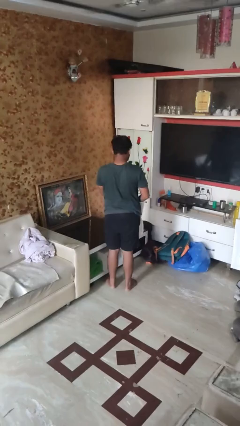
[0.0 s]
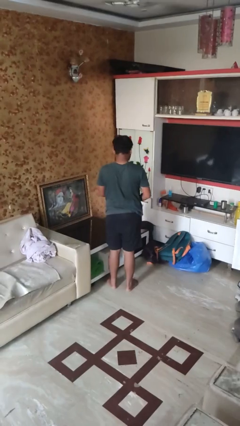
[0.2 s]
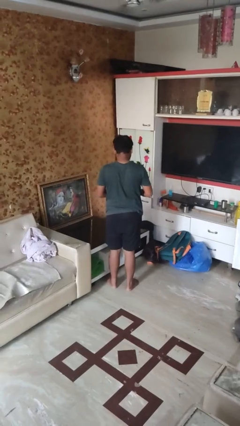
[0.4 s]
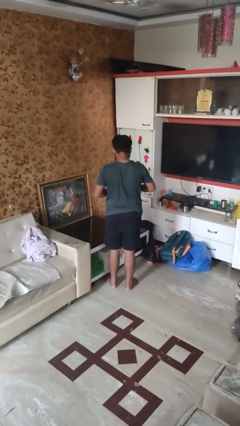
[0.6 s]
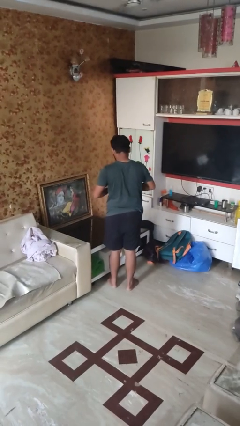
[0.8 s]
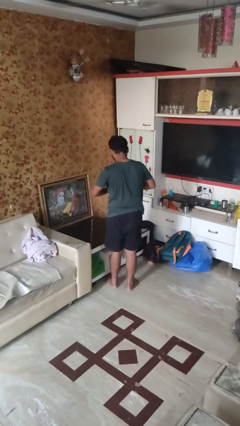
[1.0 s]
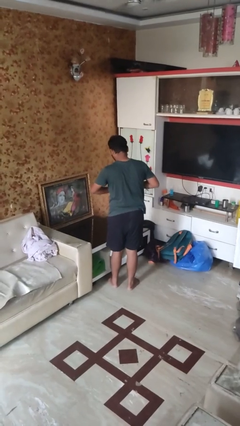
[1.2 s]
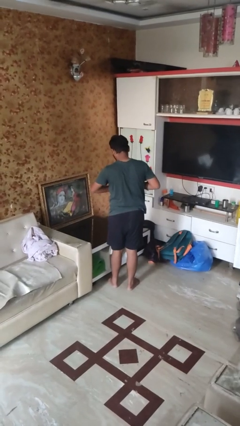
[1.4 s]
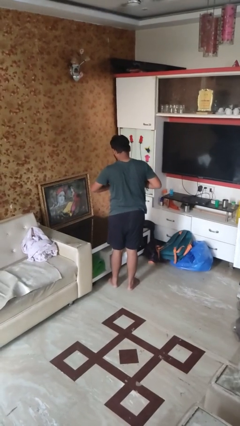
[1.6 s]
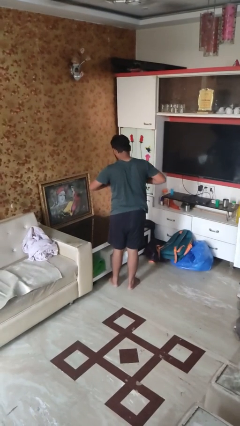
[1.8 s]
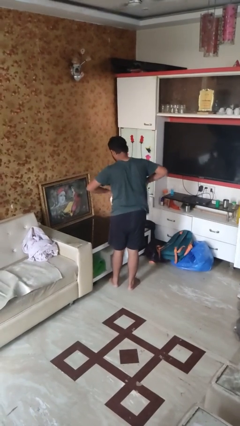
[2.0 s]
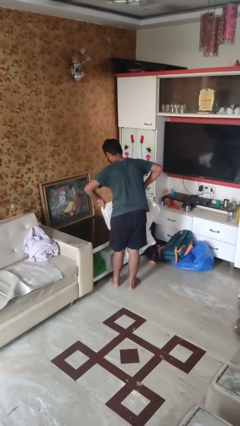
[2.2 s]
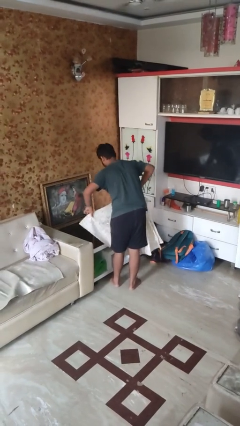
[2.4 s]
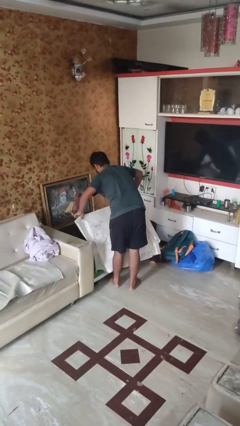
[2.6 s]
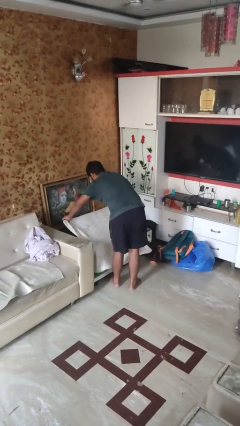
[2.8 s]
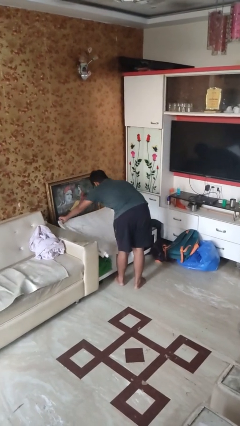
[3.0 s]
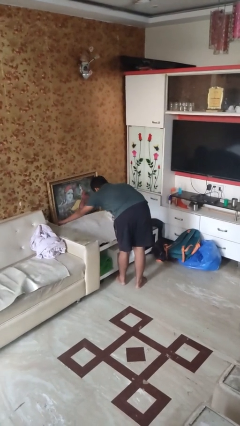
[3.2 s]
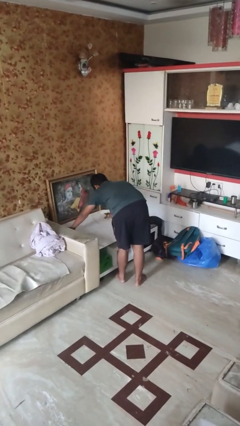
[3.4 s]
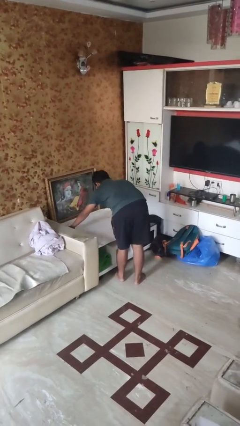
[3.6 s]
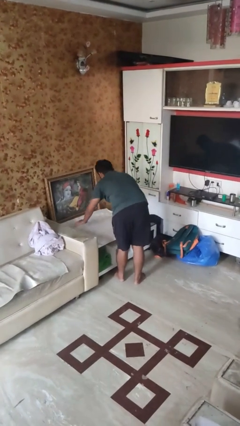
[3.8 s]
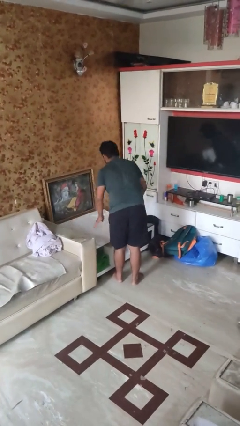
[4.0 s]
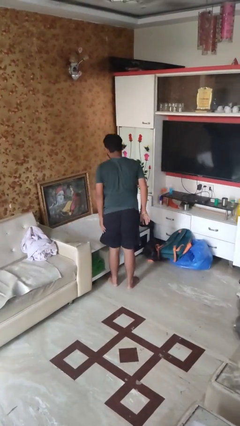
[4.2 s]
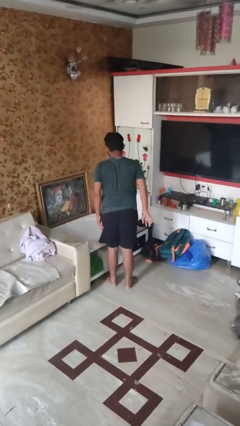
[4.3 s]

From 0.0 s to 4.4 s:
person spreads tablecloth

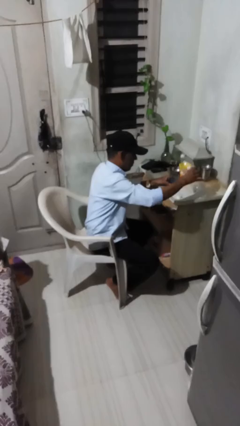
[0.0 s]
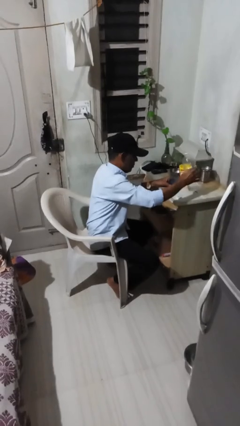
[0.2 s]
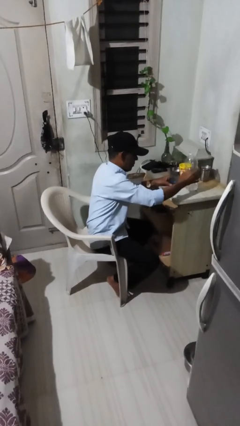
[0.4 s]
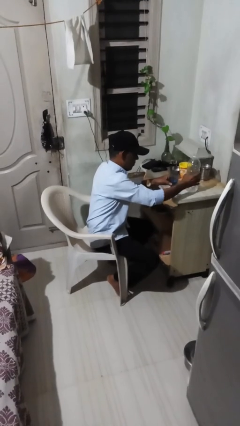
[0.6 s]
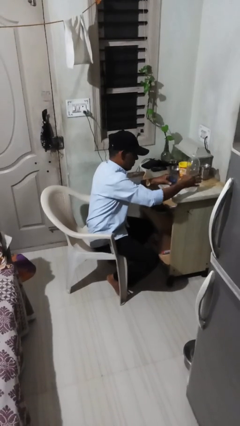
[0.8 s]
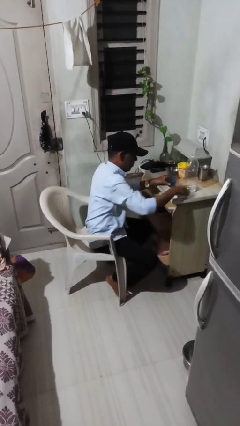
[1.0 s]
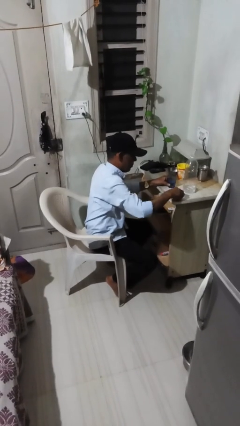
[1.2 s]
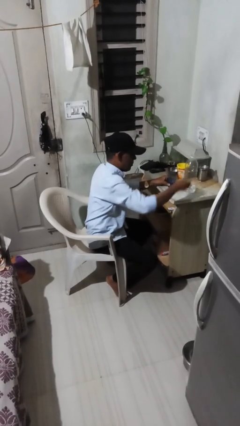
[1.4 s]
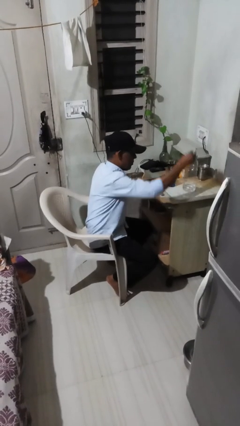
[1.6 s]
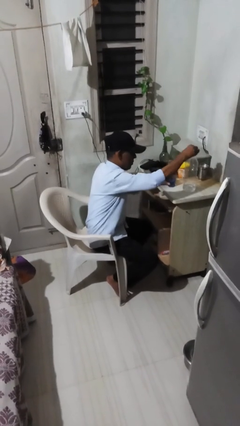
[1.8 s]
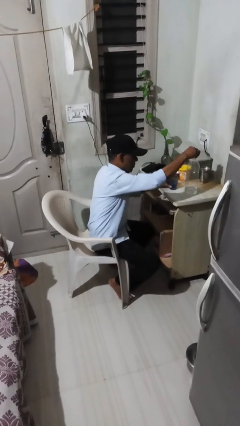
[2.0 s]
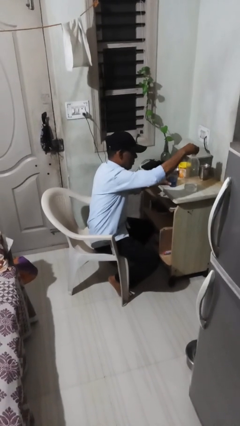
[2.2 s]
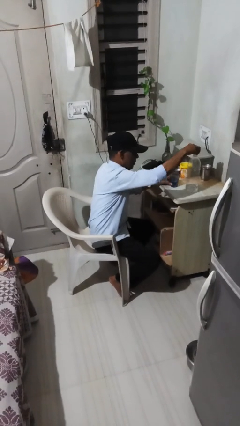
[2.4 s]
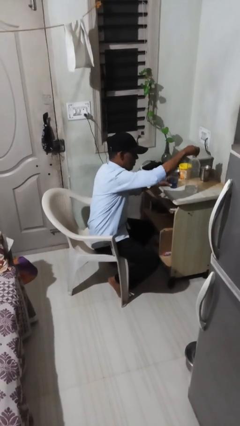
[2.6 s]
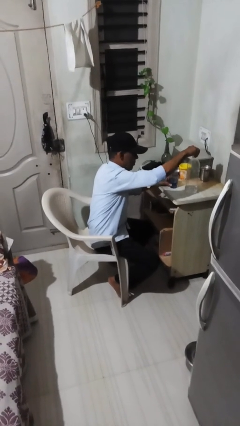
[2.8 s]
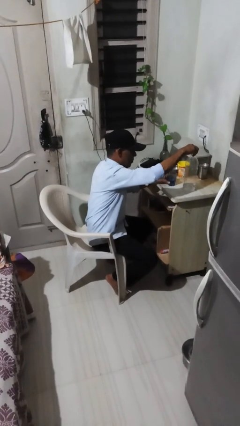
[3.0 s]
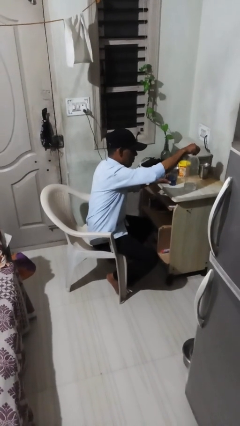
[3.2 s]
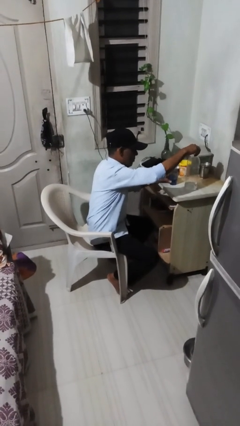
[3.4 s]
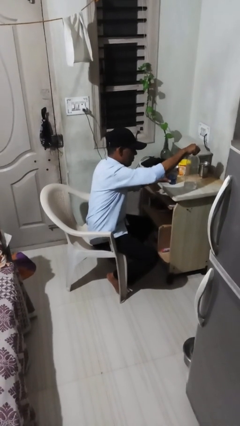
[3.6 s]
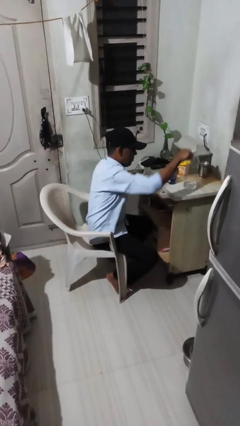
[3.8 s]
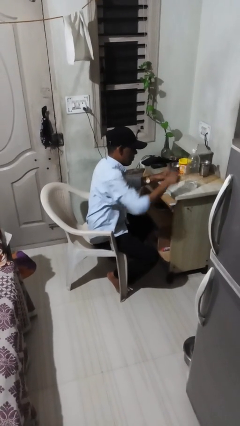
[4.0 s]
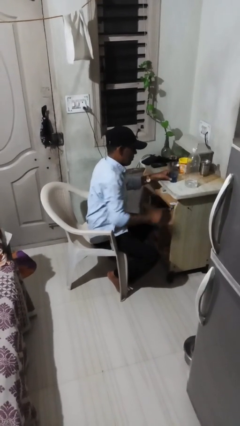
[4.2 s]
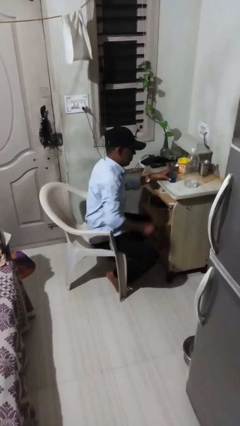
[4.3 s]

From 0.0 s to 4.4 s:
person screws lid to bottle

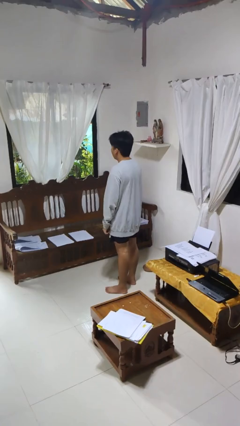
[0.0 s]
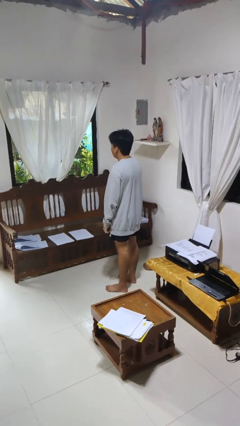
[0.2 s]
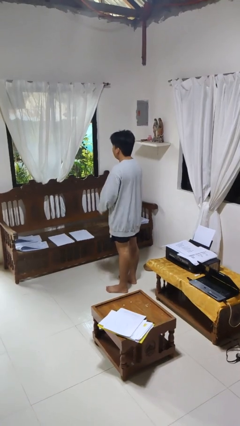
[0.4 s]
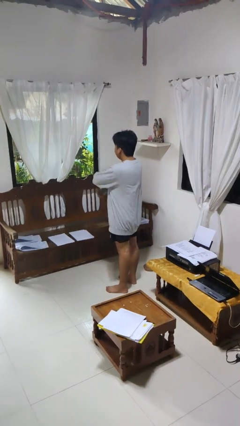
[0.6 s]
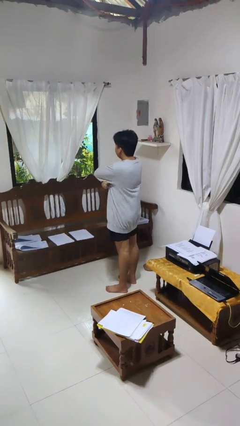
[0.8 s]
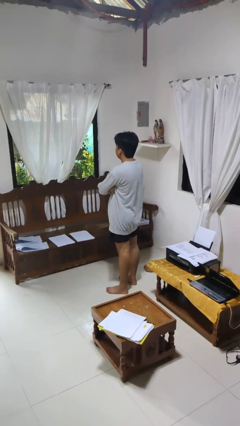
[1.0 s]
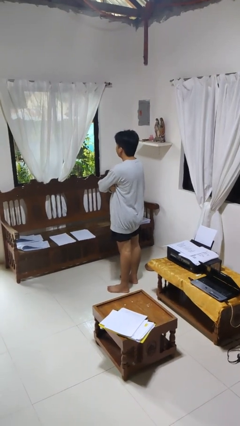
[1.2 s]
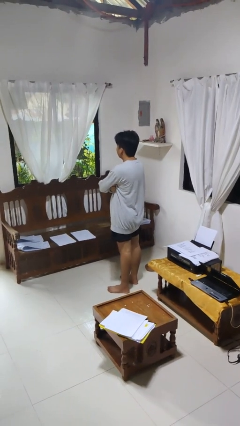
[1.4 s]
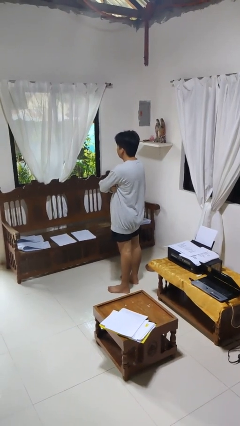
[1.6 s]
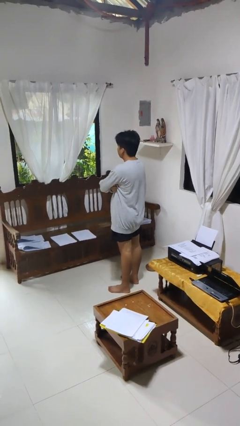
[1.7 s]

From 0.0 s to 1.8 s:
person gestures arms x

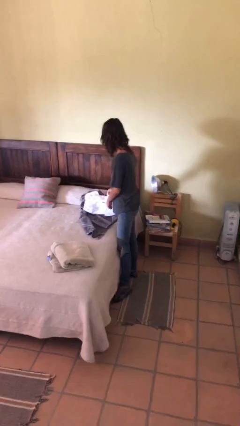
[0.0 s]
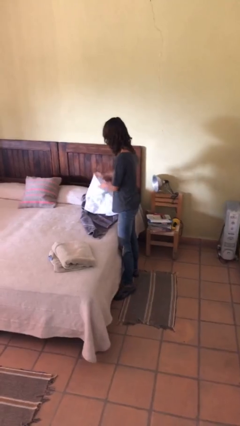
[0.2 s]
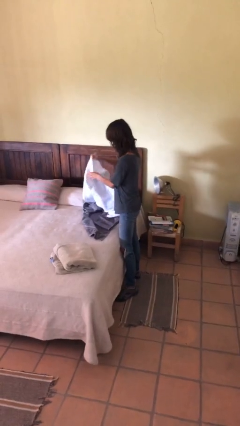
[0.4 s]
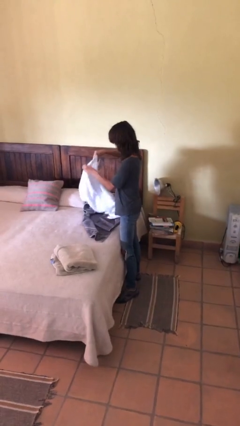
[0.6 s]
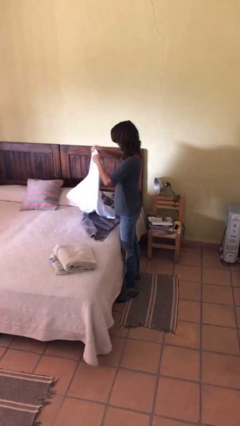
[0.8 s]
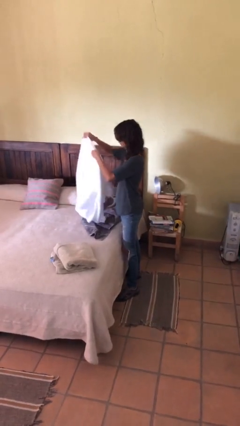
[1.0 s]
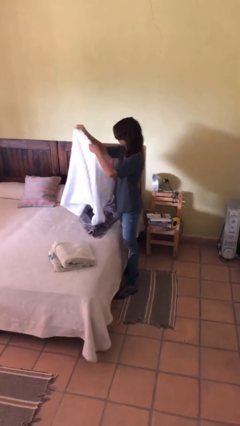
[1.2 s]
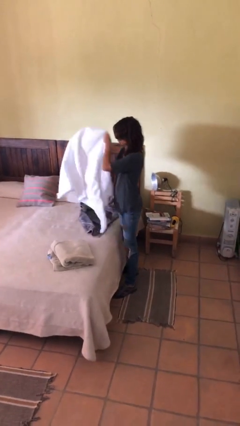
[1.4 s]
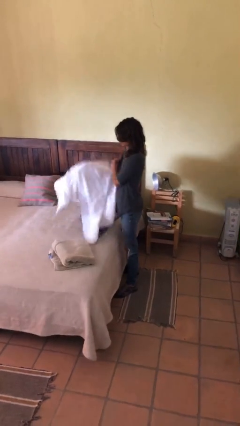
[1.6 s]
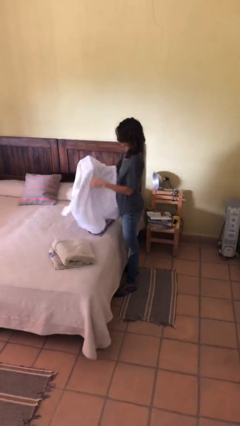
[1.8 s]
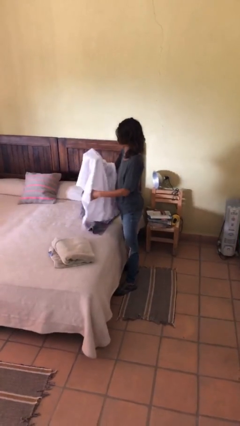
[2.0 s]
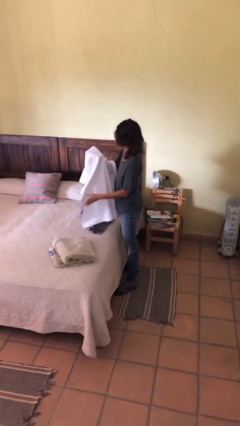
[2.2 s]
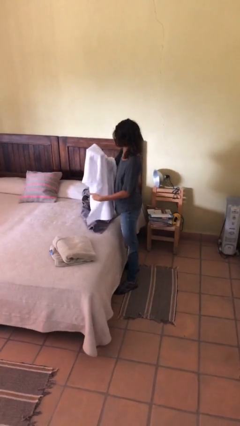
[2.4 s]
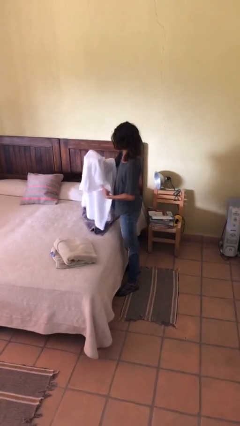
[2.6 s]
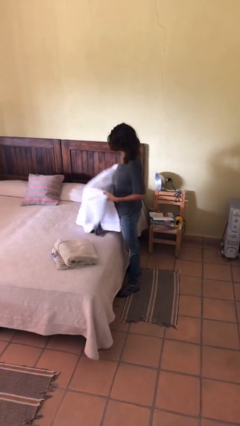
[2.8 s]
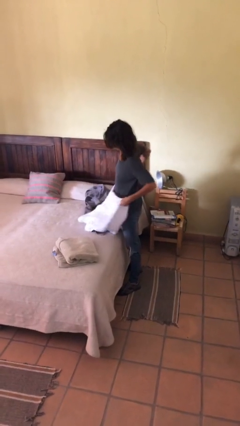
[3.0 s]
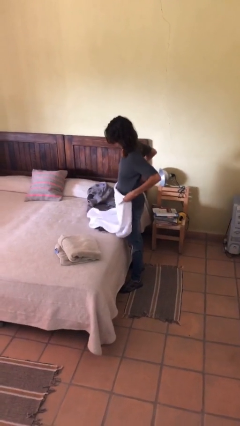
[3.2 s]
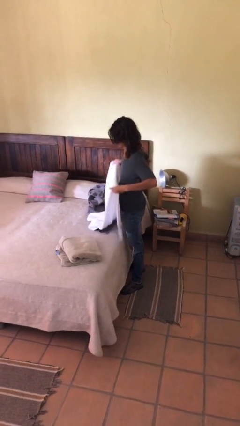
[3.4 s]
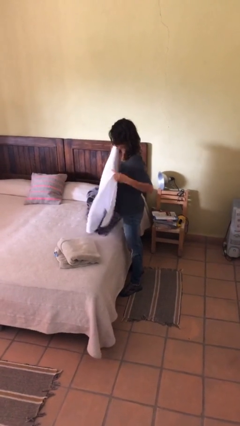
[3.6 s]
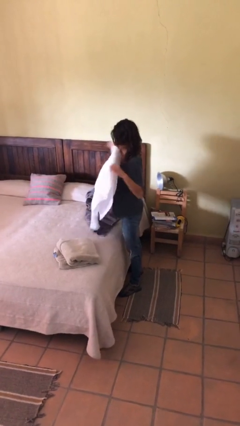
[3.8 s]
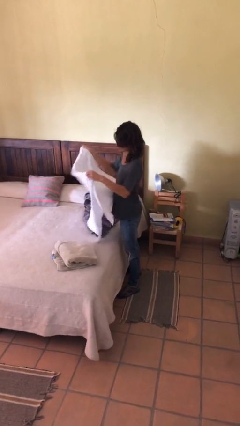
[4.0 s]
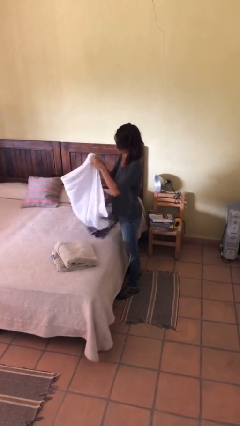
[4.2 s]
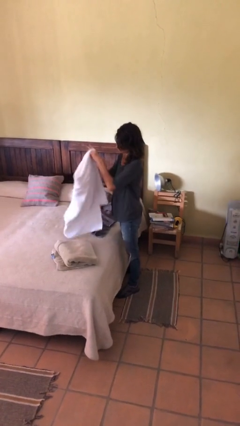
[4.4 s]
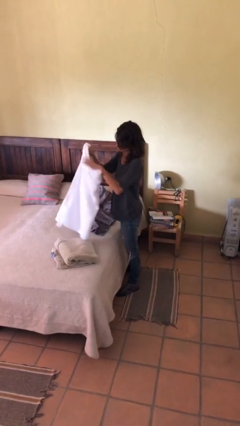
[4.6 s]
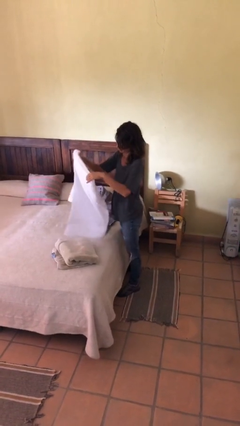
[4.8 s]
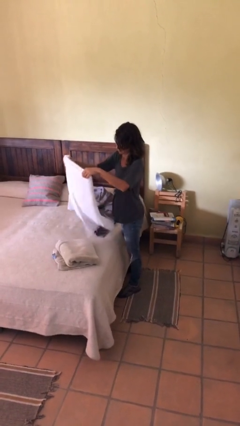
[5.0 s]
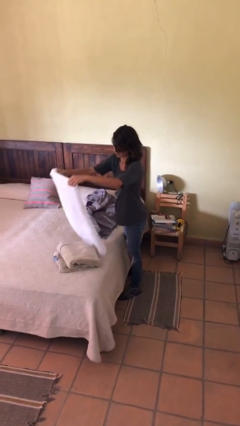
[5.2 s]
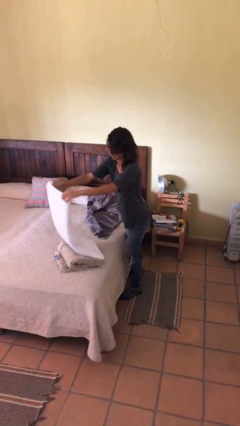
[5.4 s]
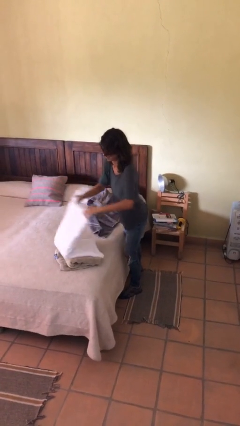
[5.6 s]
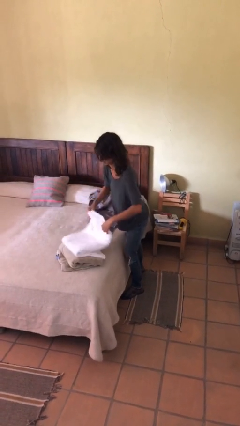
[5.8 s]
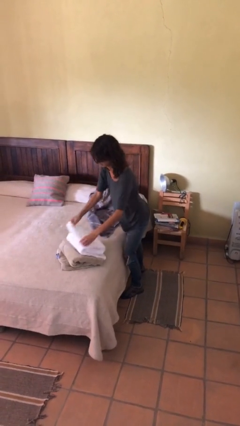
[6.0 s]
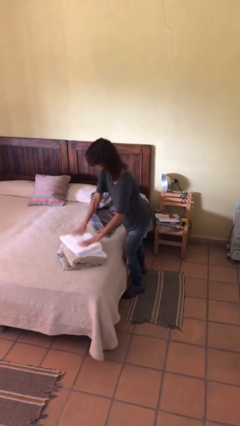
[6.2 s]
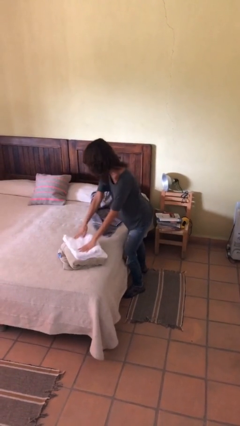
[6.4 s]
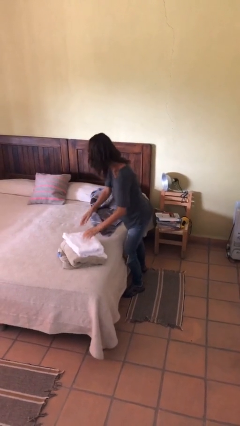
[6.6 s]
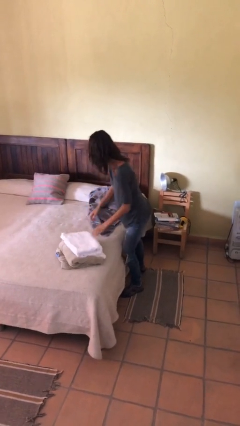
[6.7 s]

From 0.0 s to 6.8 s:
person folds towel

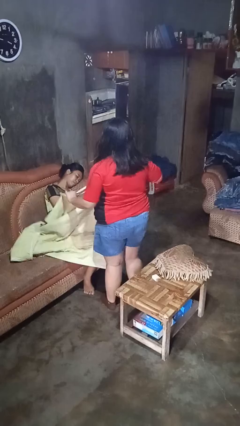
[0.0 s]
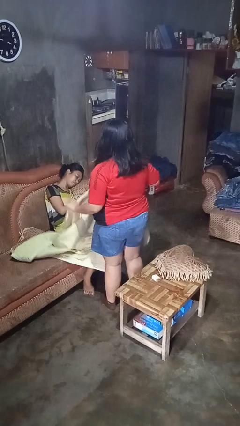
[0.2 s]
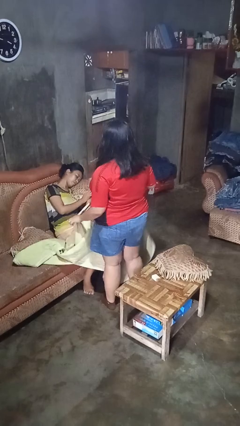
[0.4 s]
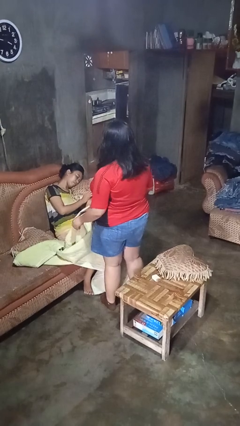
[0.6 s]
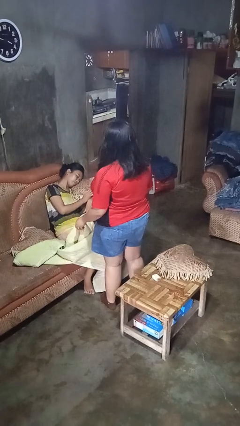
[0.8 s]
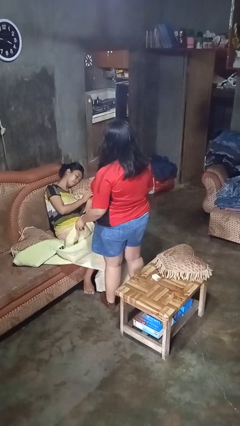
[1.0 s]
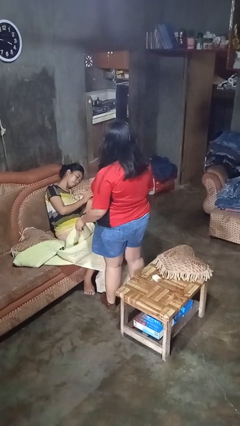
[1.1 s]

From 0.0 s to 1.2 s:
person uncovers friend with blanket
